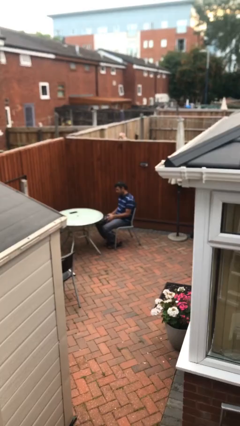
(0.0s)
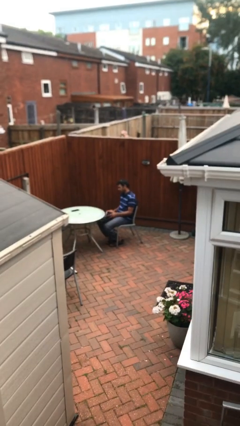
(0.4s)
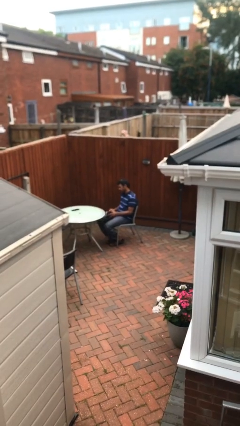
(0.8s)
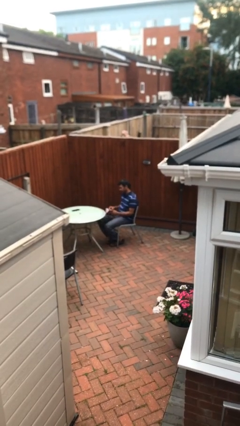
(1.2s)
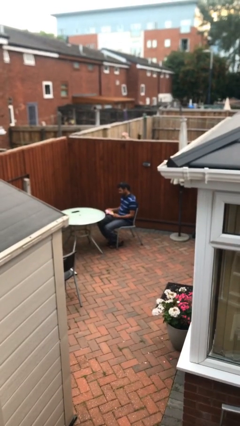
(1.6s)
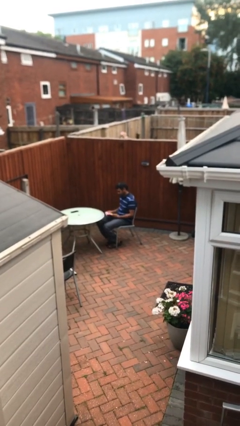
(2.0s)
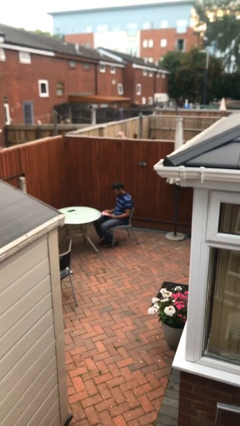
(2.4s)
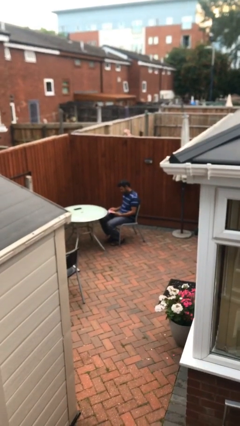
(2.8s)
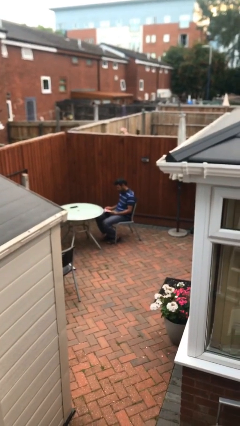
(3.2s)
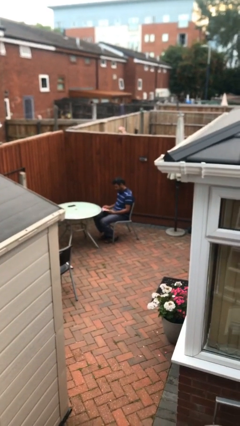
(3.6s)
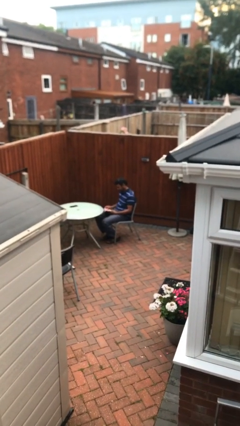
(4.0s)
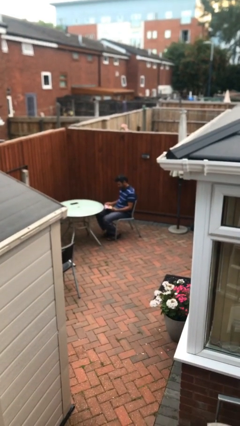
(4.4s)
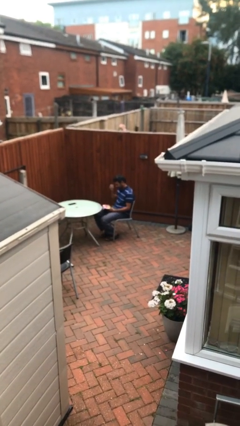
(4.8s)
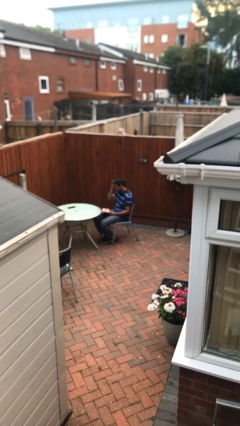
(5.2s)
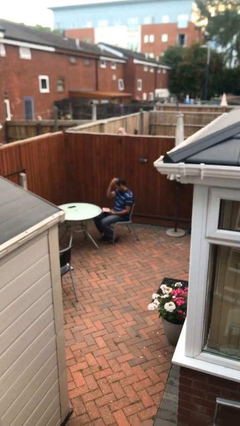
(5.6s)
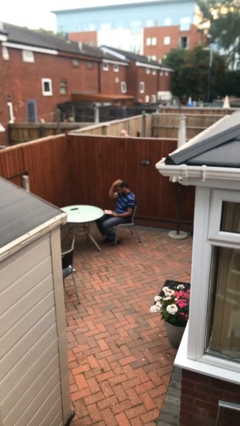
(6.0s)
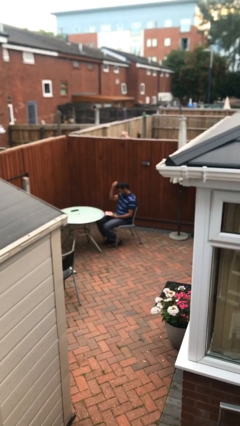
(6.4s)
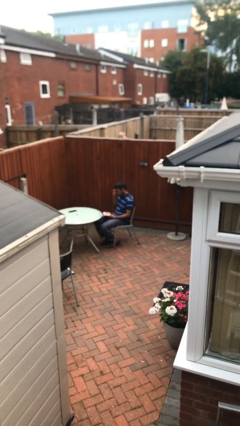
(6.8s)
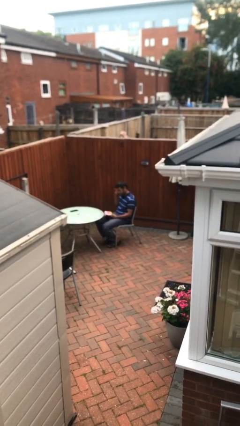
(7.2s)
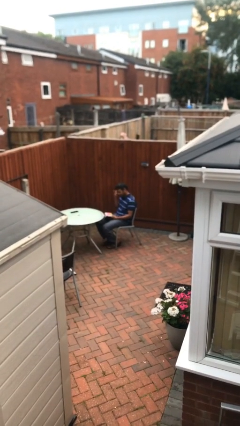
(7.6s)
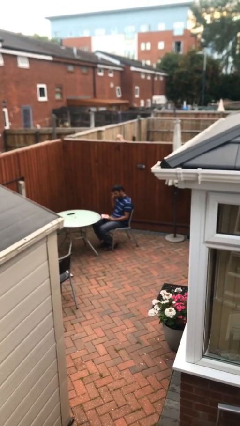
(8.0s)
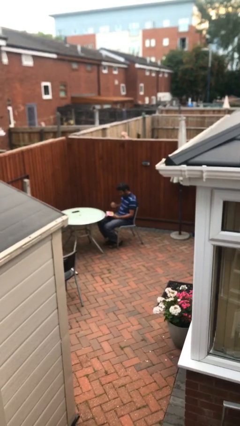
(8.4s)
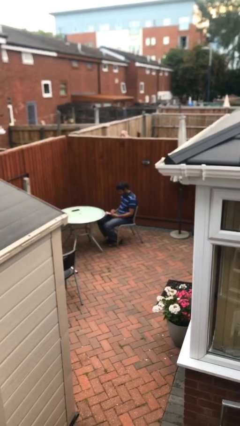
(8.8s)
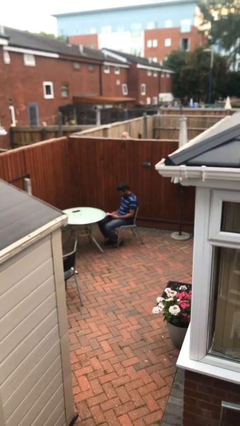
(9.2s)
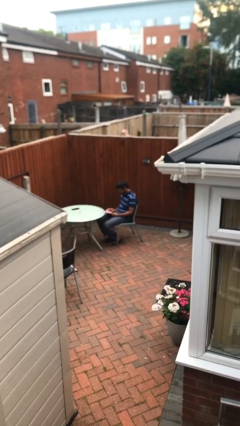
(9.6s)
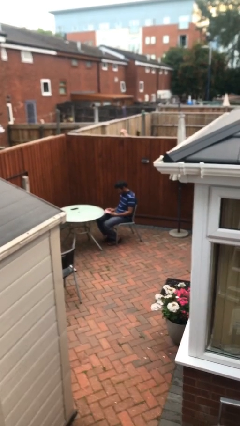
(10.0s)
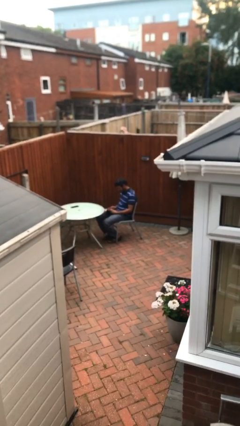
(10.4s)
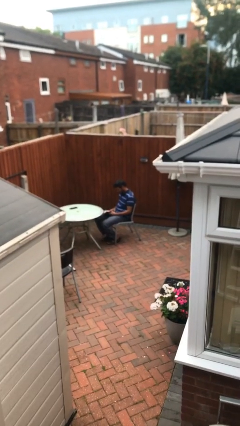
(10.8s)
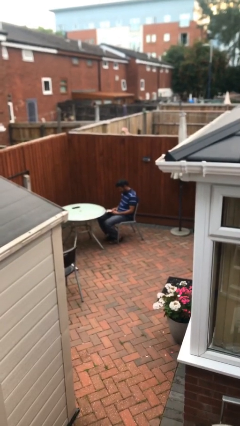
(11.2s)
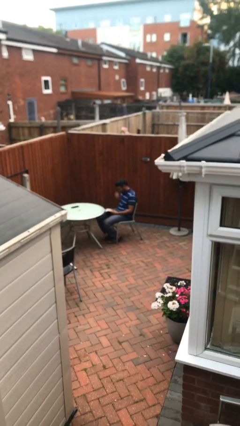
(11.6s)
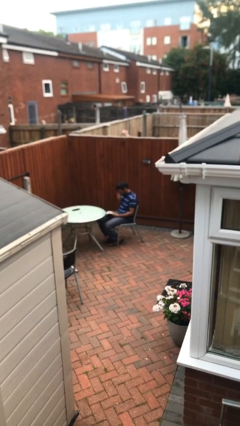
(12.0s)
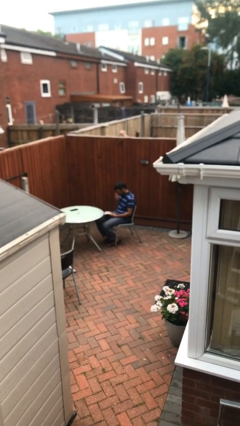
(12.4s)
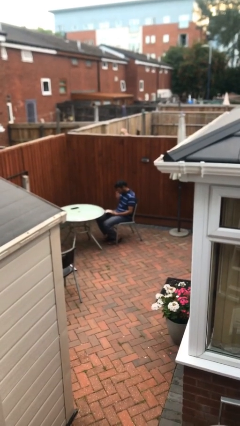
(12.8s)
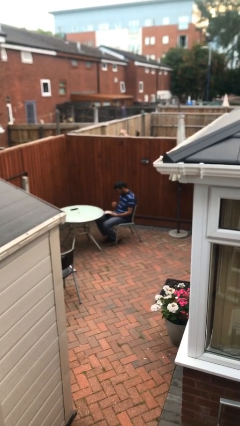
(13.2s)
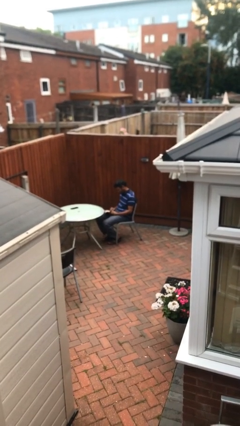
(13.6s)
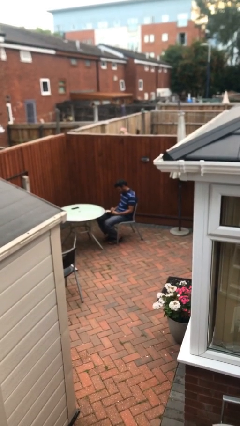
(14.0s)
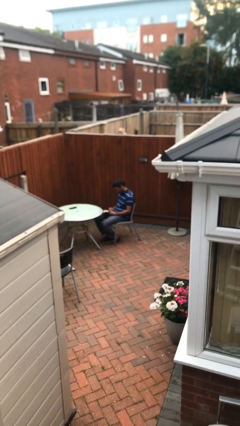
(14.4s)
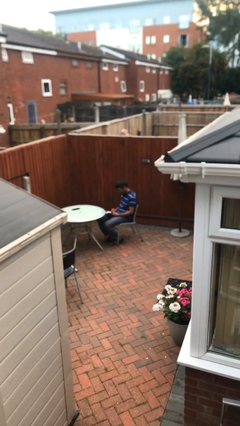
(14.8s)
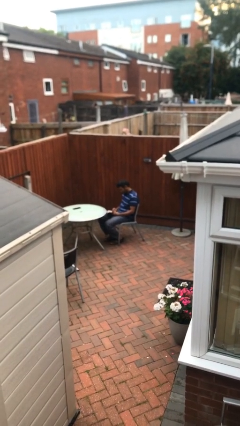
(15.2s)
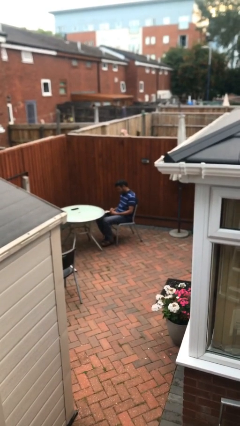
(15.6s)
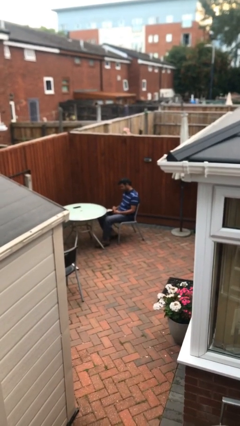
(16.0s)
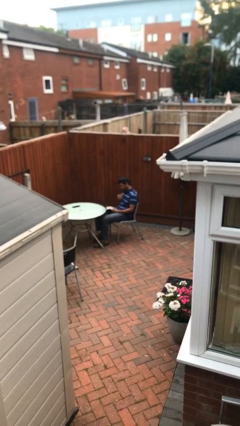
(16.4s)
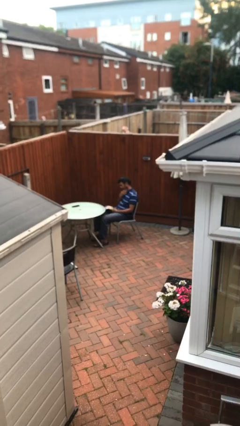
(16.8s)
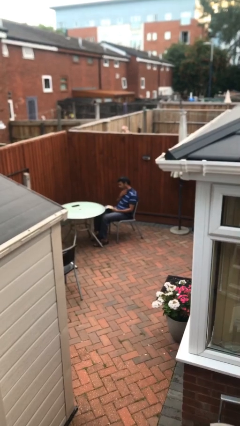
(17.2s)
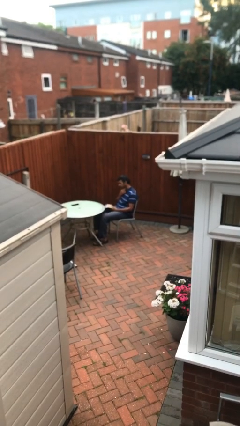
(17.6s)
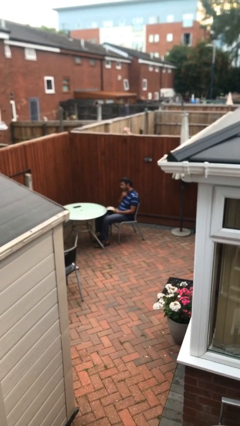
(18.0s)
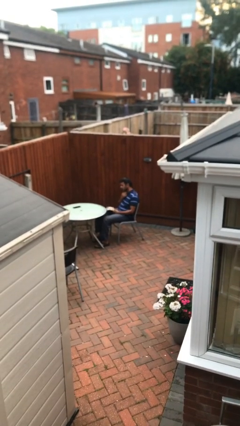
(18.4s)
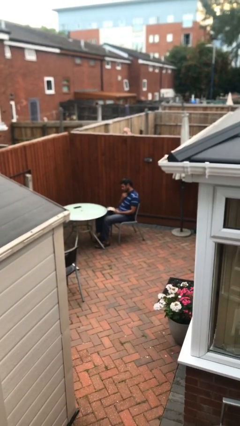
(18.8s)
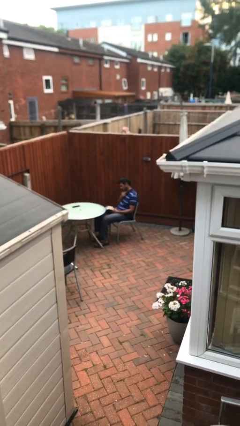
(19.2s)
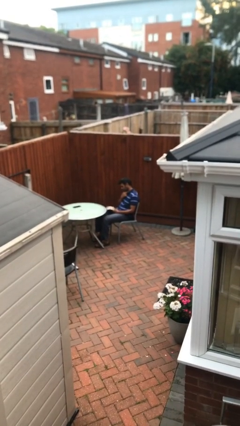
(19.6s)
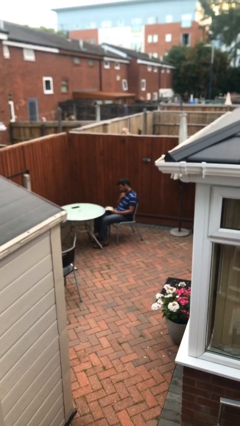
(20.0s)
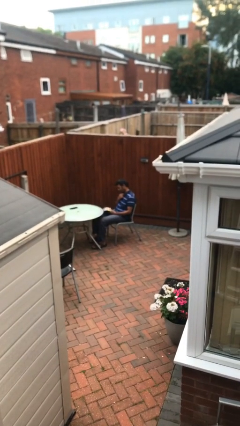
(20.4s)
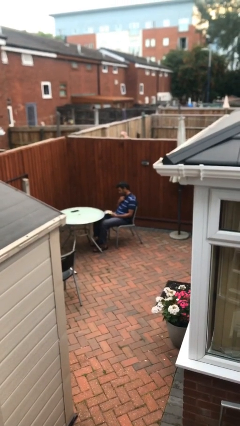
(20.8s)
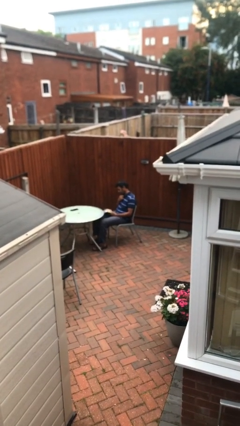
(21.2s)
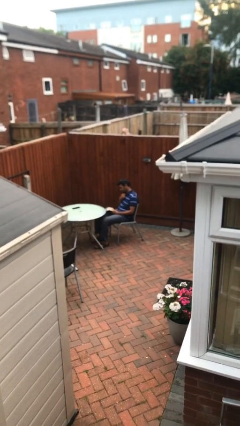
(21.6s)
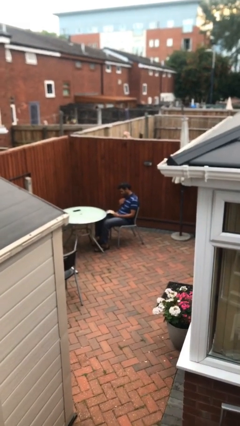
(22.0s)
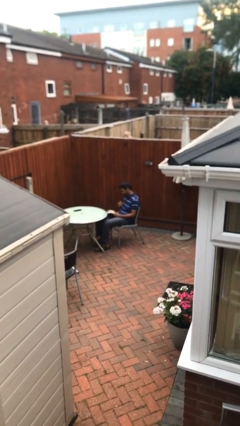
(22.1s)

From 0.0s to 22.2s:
person reads document

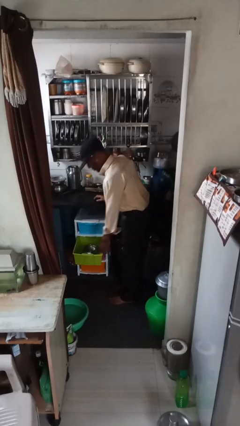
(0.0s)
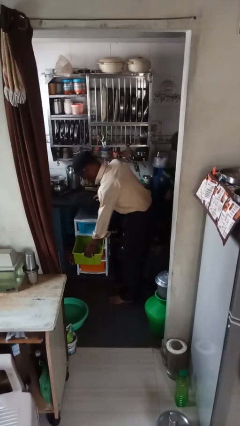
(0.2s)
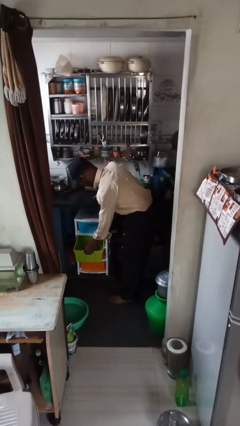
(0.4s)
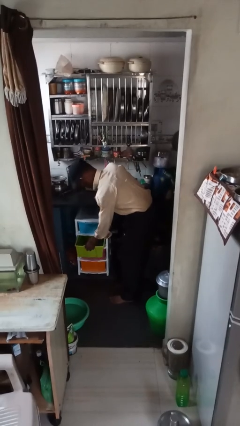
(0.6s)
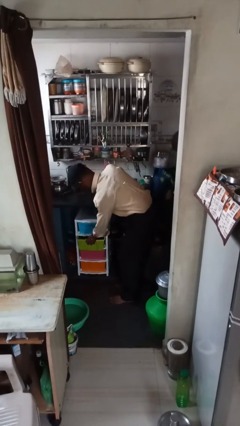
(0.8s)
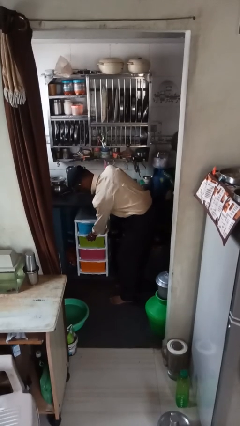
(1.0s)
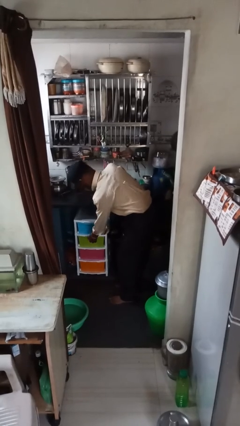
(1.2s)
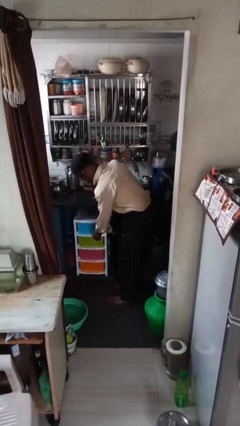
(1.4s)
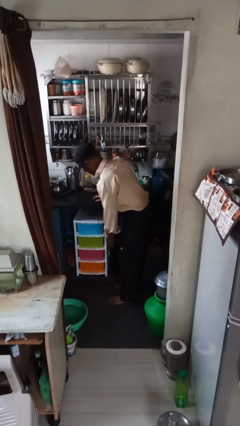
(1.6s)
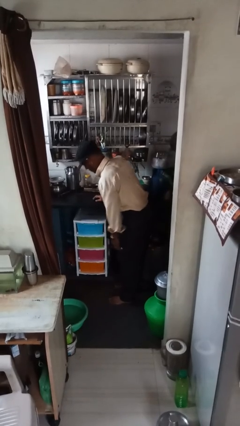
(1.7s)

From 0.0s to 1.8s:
person closes kitchen drawer

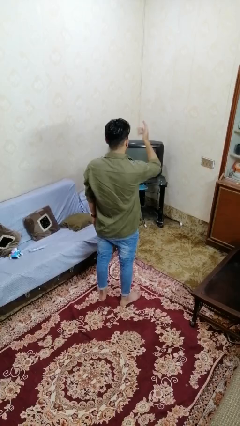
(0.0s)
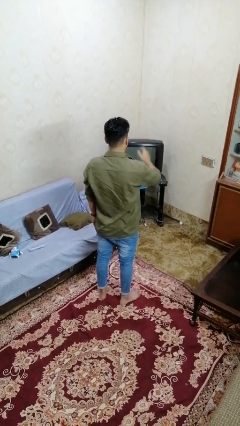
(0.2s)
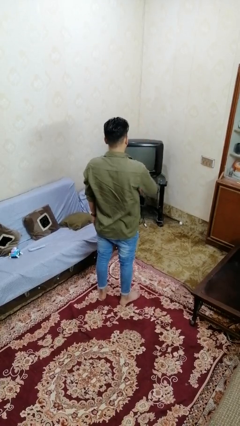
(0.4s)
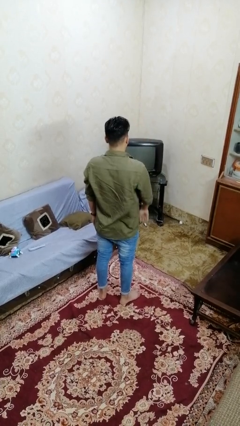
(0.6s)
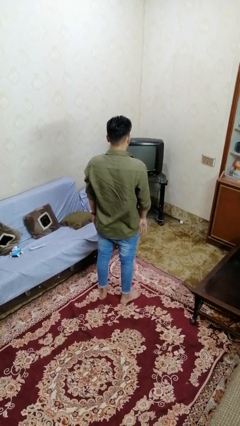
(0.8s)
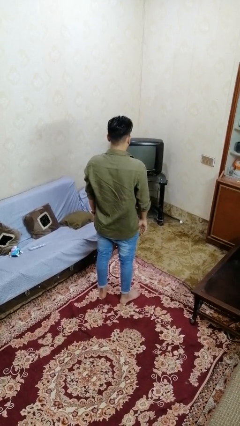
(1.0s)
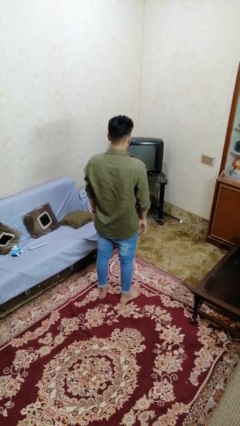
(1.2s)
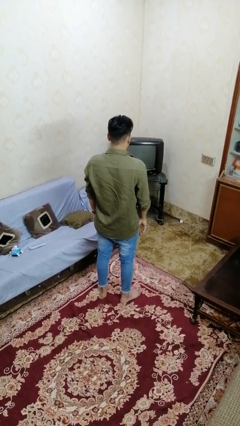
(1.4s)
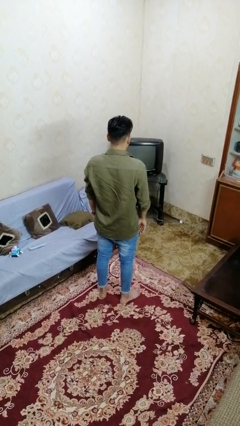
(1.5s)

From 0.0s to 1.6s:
person gestures lower hand

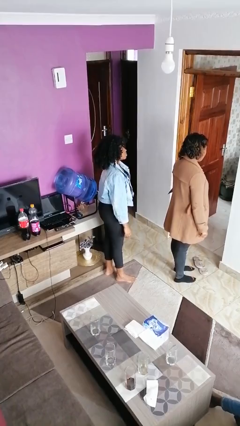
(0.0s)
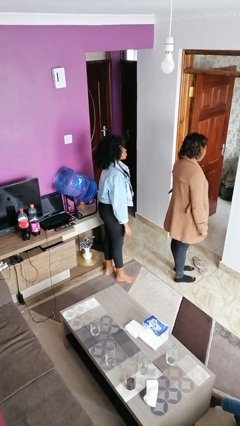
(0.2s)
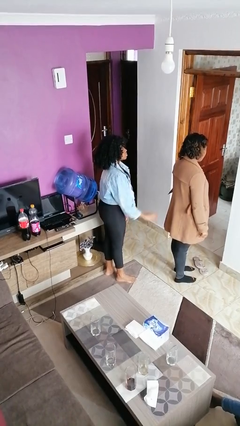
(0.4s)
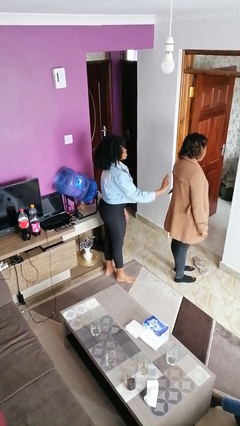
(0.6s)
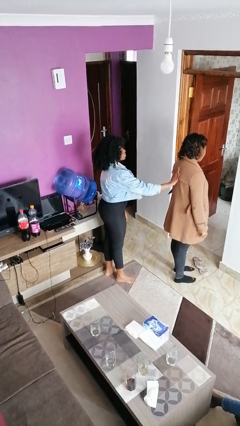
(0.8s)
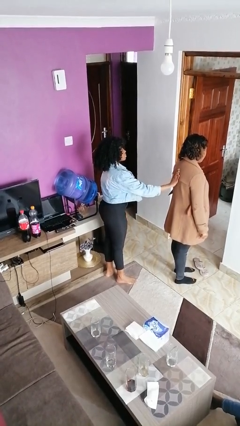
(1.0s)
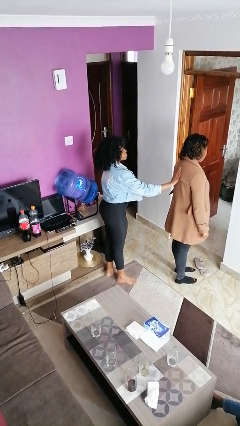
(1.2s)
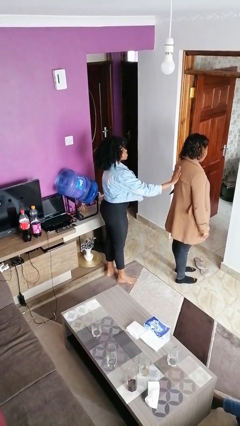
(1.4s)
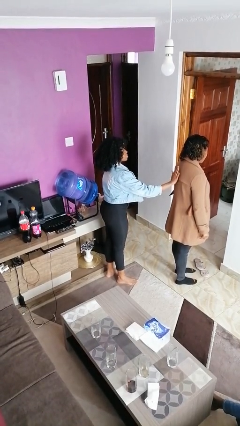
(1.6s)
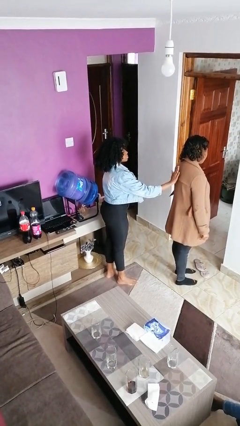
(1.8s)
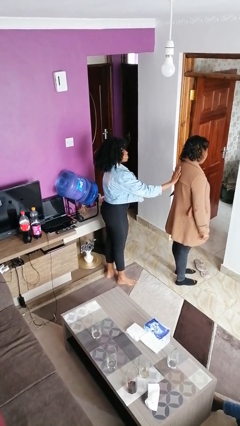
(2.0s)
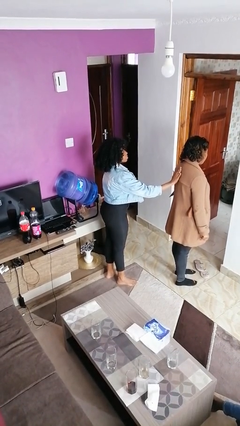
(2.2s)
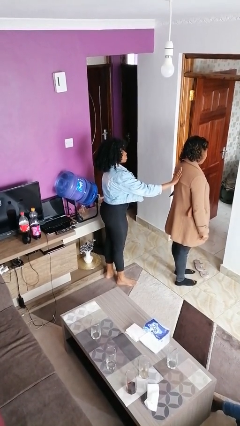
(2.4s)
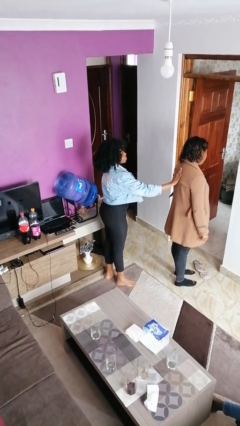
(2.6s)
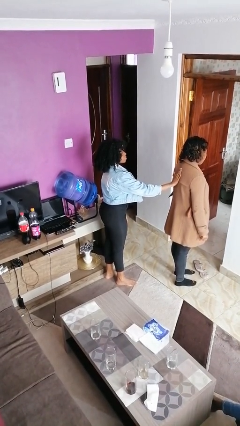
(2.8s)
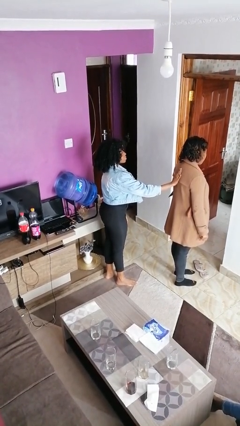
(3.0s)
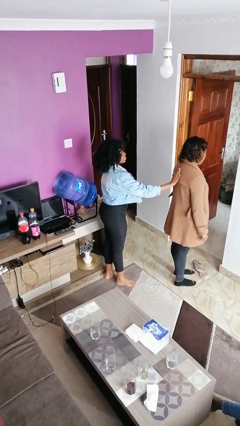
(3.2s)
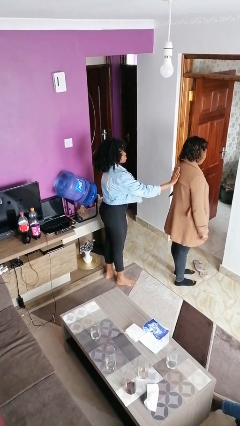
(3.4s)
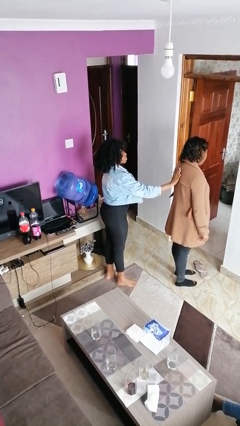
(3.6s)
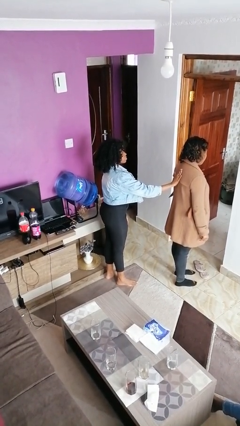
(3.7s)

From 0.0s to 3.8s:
person touches back of person
